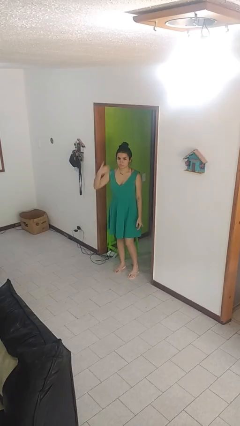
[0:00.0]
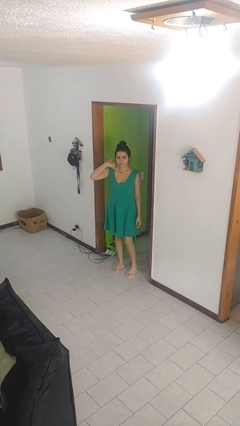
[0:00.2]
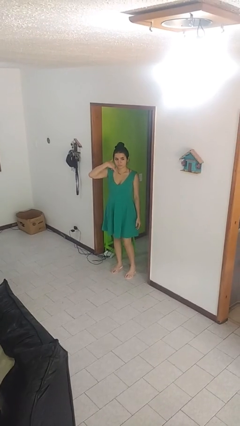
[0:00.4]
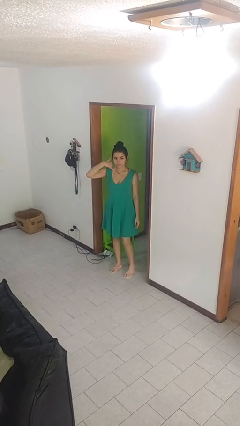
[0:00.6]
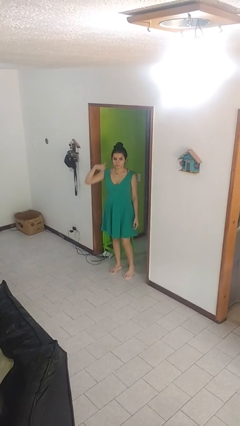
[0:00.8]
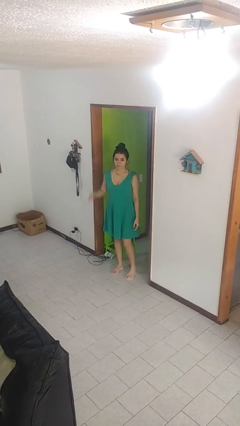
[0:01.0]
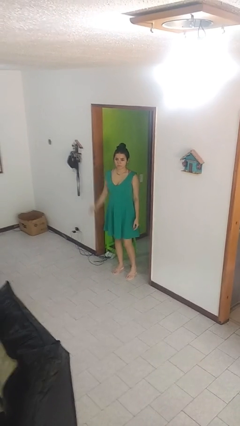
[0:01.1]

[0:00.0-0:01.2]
person gestures call me

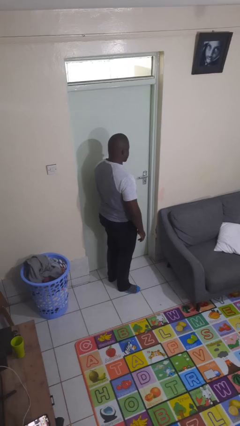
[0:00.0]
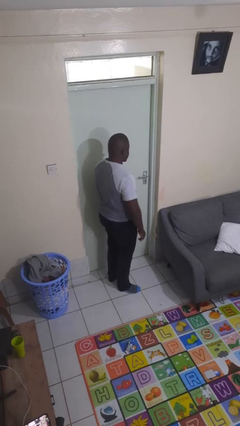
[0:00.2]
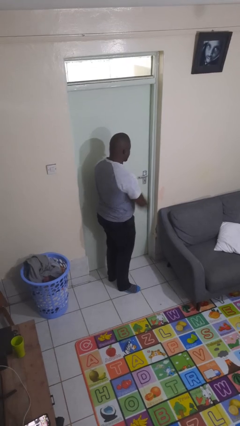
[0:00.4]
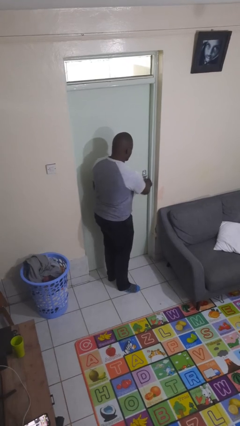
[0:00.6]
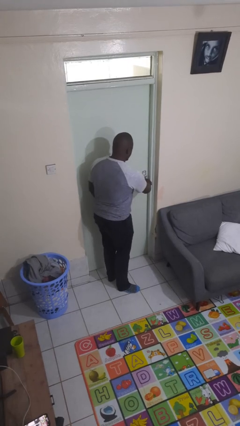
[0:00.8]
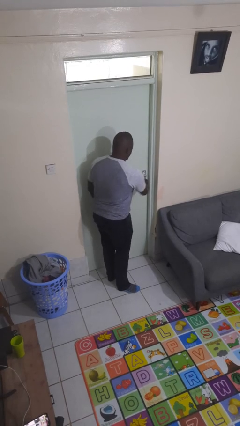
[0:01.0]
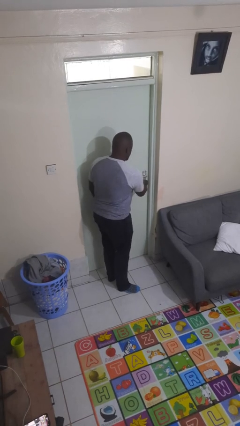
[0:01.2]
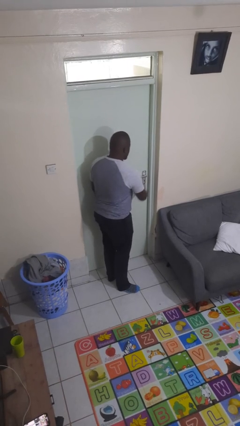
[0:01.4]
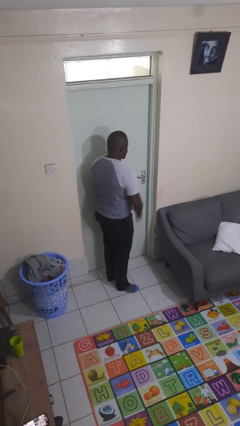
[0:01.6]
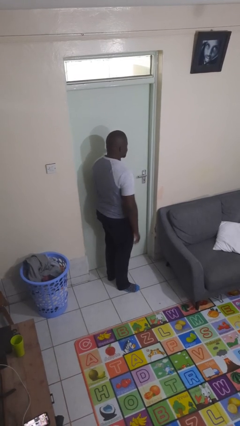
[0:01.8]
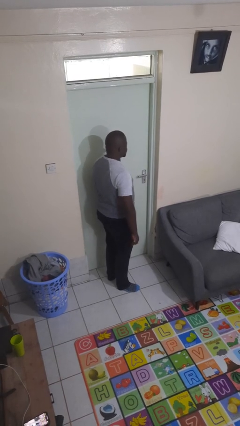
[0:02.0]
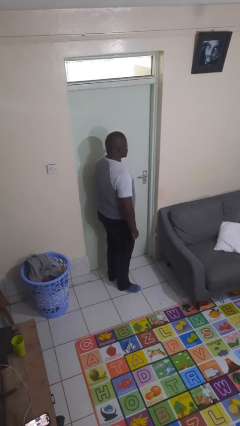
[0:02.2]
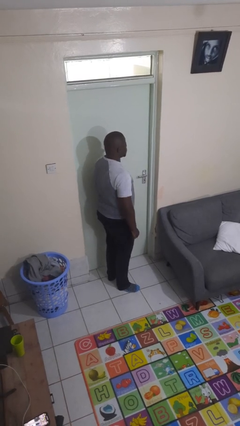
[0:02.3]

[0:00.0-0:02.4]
person locks door with keys

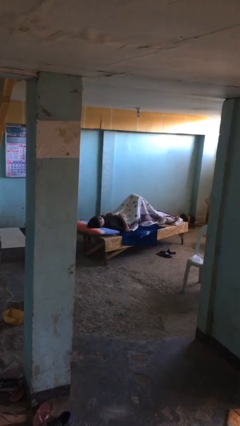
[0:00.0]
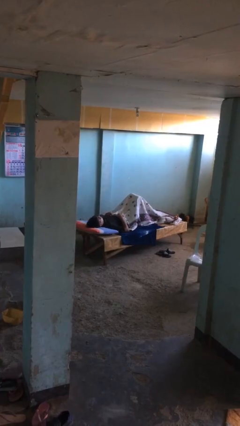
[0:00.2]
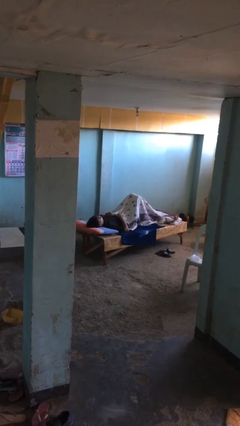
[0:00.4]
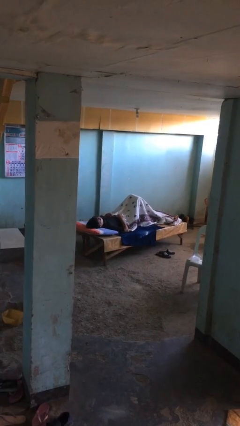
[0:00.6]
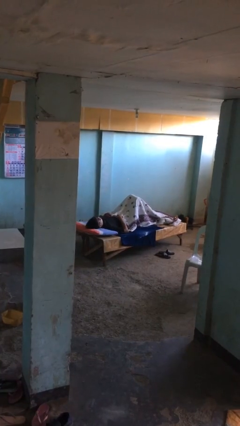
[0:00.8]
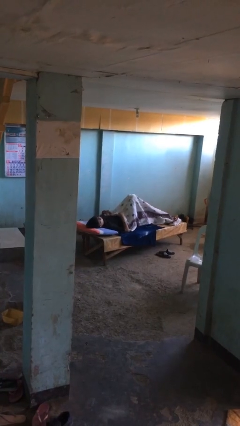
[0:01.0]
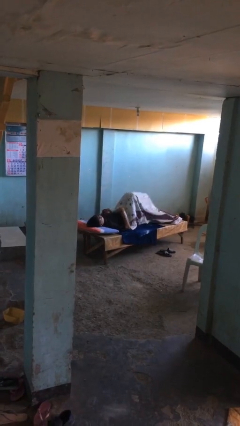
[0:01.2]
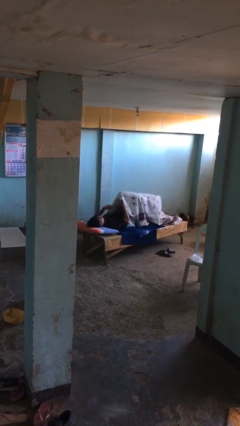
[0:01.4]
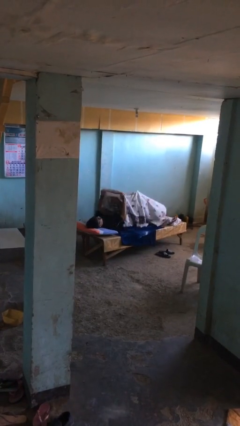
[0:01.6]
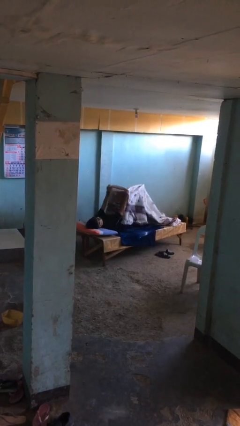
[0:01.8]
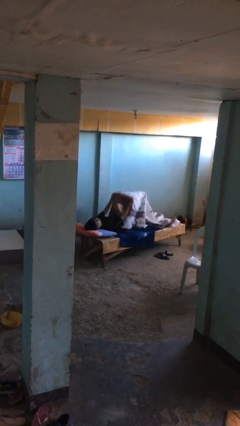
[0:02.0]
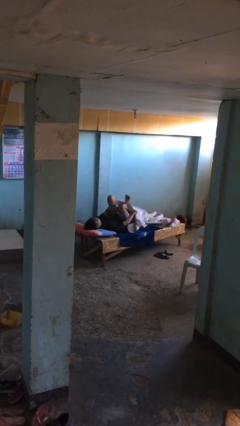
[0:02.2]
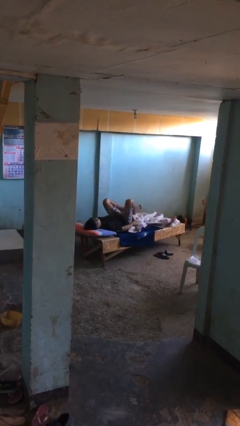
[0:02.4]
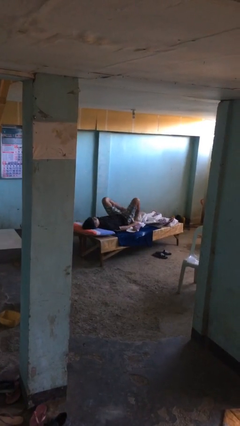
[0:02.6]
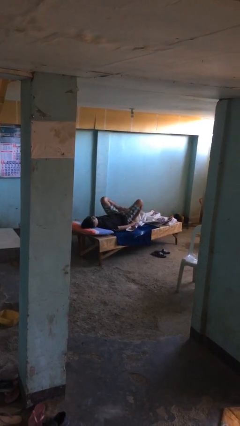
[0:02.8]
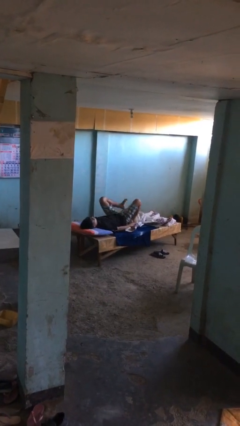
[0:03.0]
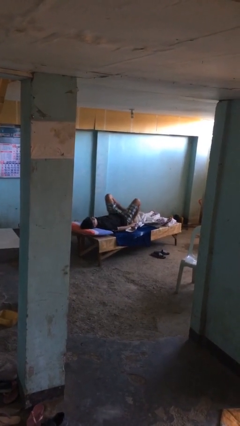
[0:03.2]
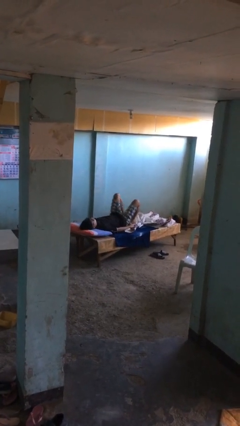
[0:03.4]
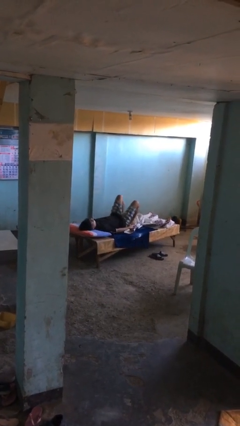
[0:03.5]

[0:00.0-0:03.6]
person uncovers with bedsheets

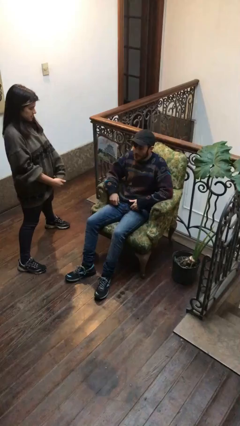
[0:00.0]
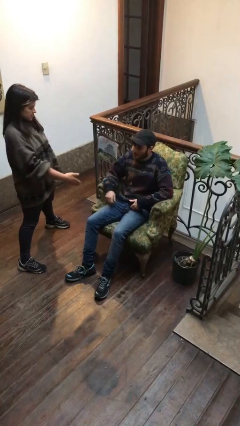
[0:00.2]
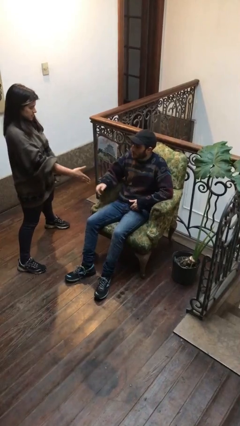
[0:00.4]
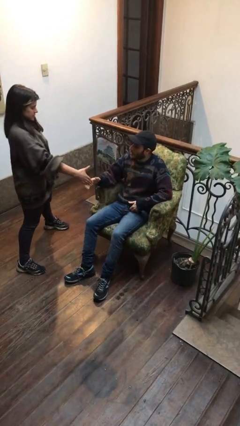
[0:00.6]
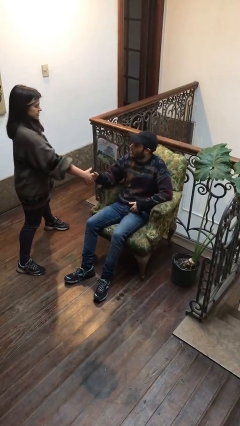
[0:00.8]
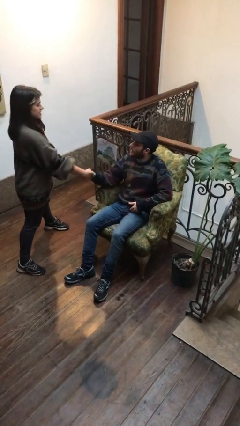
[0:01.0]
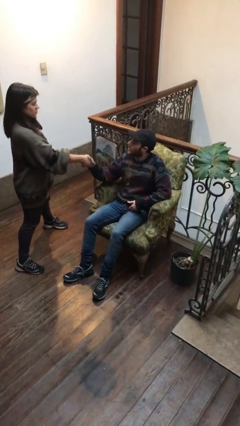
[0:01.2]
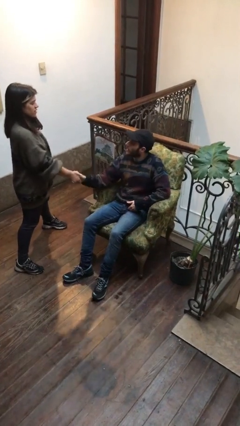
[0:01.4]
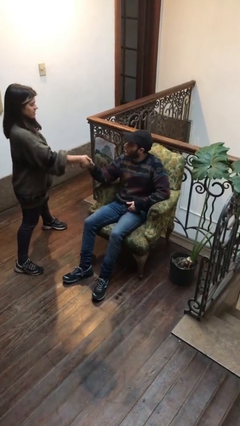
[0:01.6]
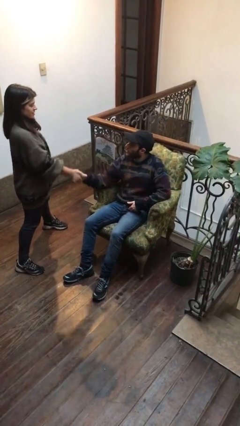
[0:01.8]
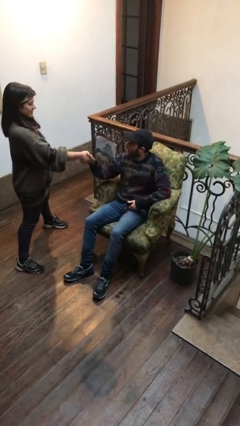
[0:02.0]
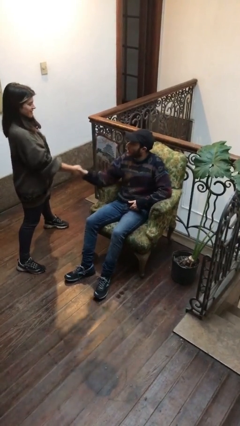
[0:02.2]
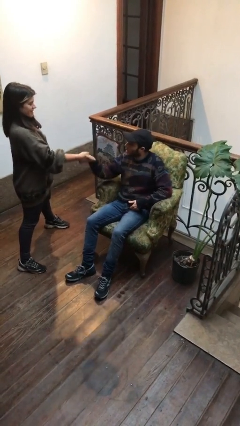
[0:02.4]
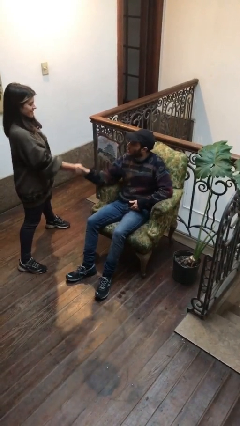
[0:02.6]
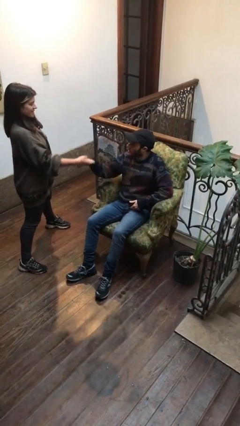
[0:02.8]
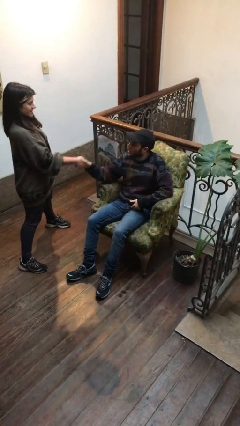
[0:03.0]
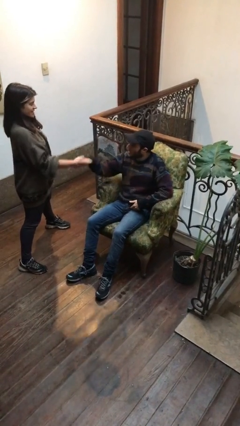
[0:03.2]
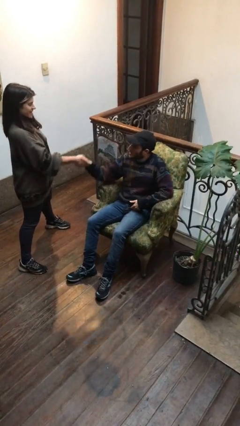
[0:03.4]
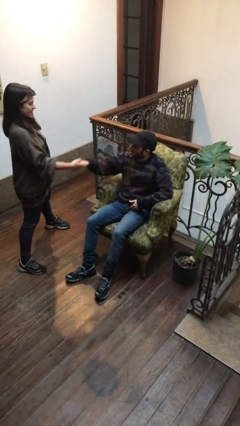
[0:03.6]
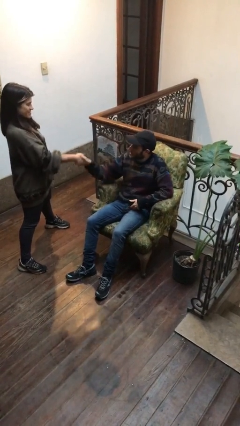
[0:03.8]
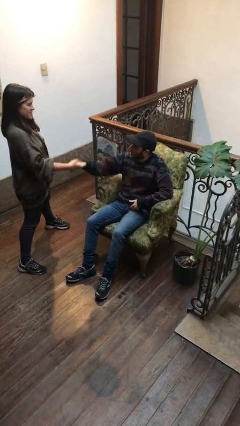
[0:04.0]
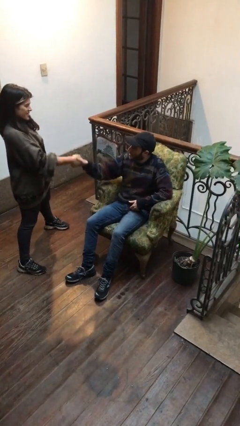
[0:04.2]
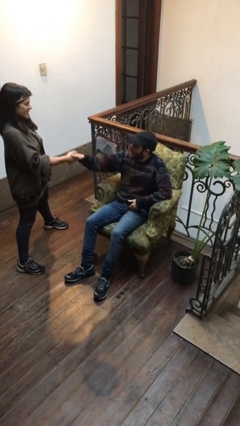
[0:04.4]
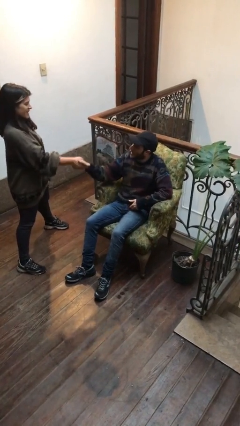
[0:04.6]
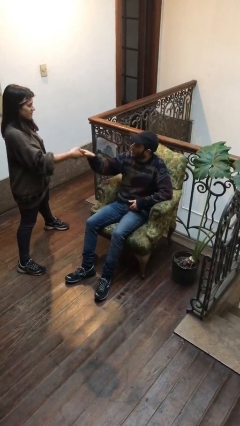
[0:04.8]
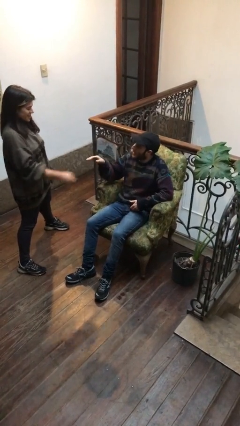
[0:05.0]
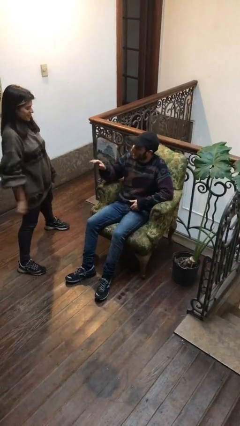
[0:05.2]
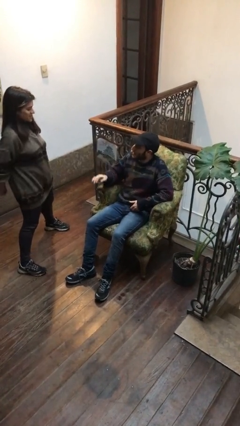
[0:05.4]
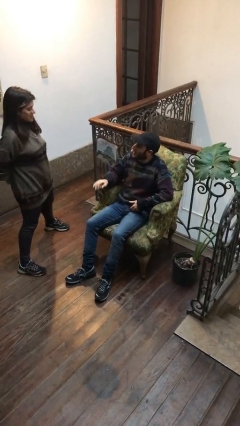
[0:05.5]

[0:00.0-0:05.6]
person shakes hand

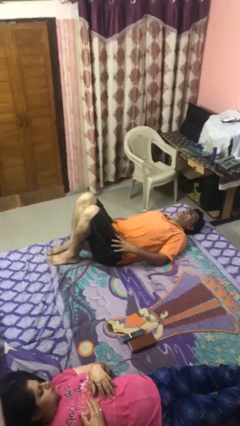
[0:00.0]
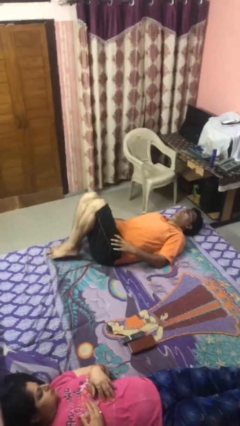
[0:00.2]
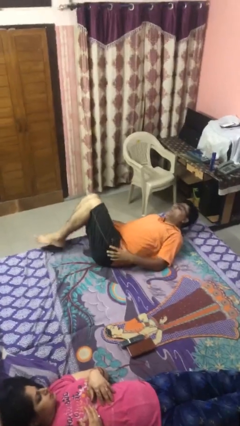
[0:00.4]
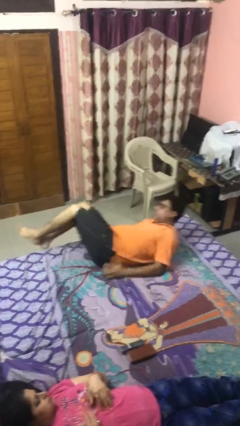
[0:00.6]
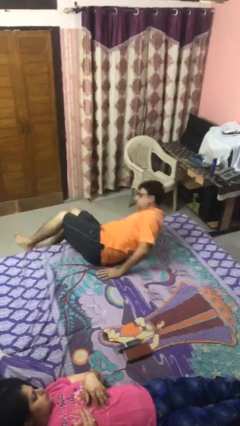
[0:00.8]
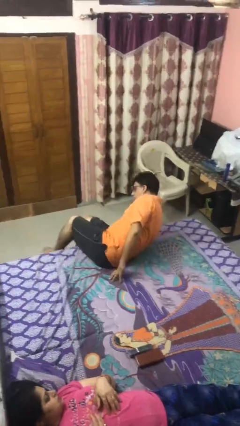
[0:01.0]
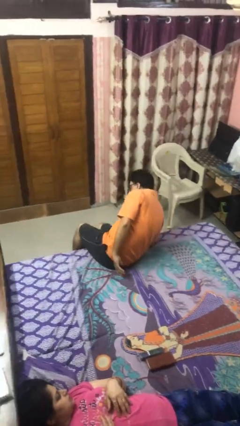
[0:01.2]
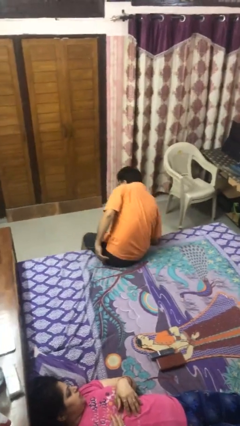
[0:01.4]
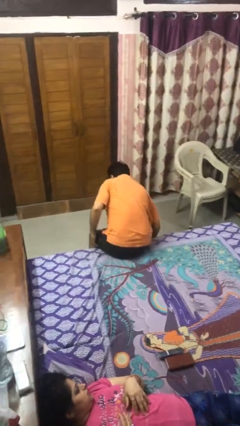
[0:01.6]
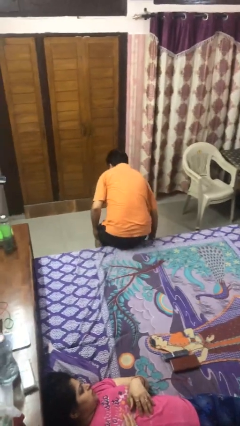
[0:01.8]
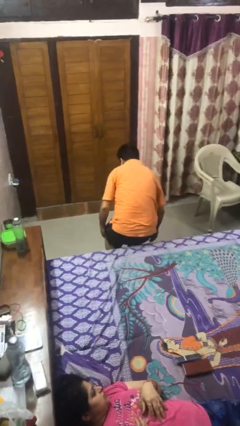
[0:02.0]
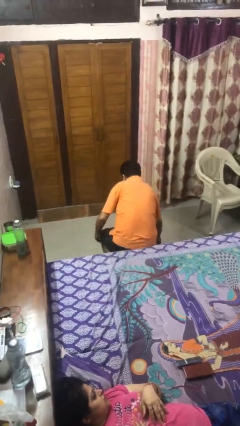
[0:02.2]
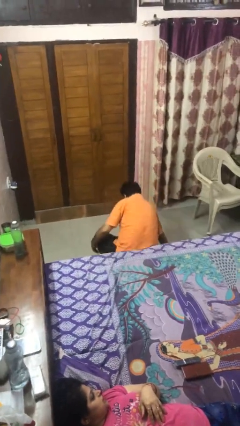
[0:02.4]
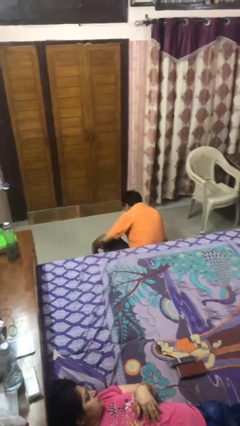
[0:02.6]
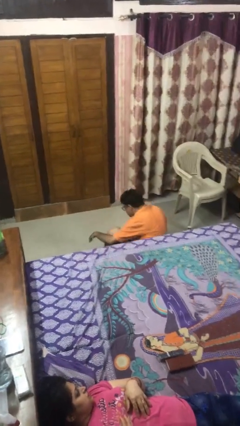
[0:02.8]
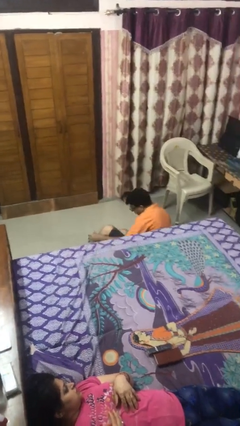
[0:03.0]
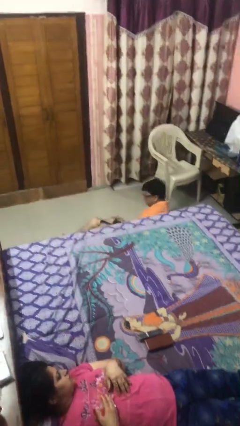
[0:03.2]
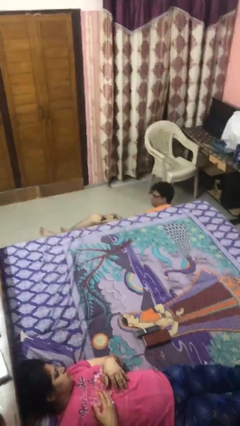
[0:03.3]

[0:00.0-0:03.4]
person falls from bed

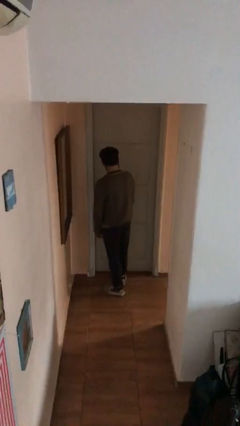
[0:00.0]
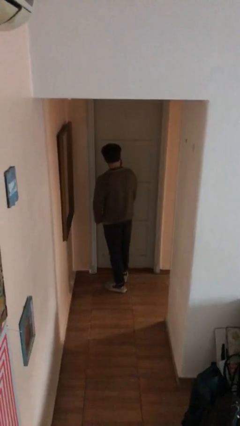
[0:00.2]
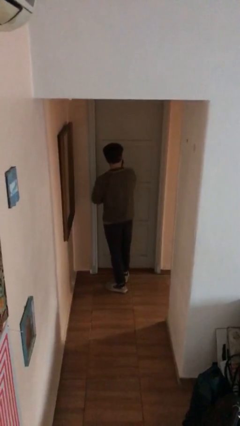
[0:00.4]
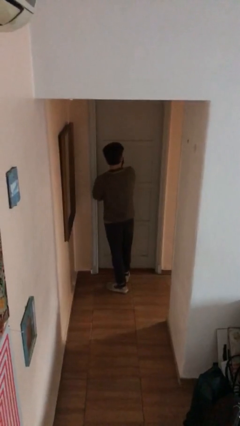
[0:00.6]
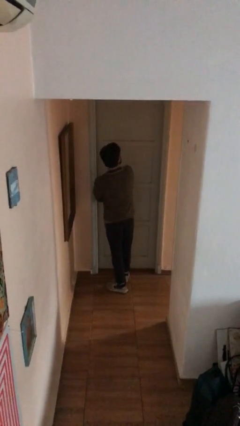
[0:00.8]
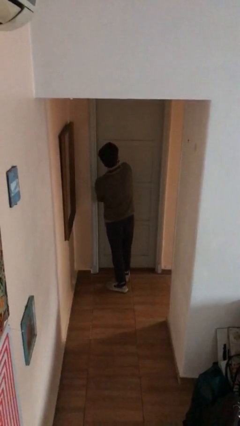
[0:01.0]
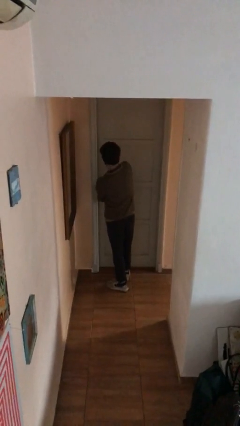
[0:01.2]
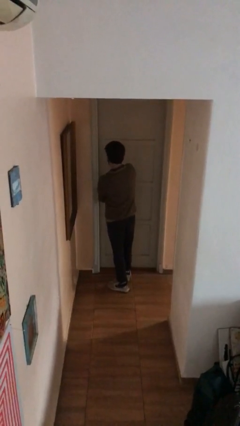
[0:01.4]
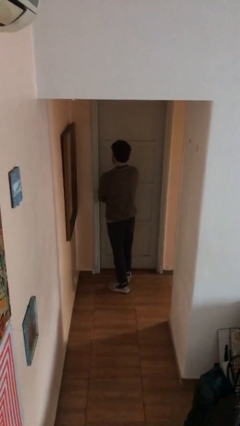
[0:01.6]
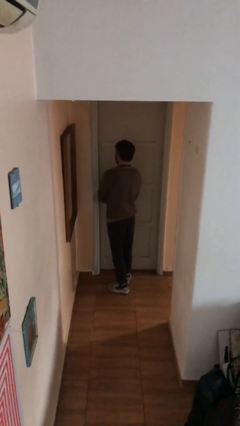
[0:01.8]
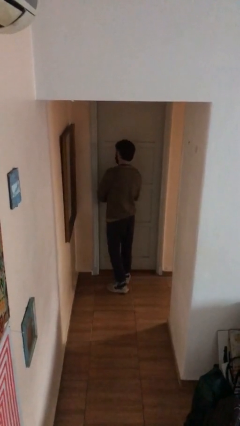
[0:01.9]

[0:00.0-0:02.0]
person unlocks door with keys
